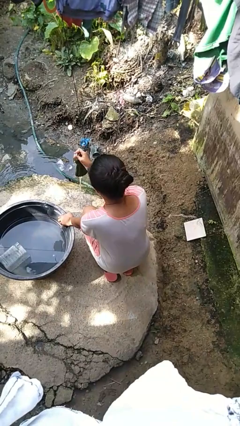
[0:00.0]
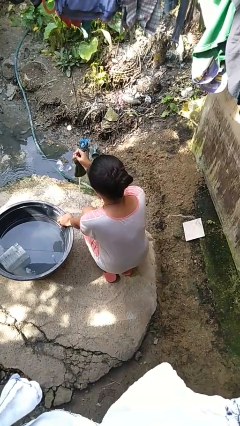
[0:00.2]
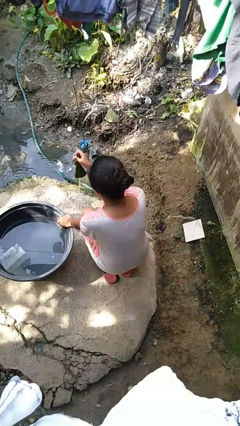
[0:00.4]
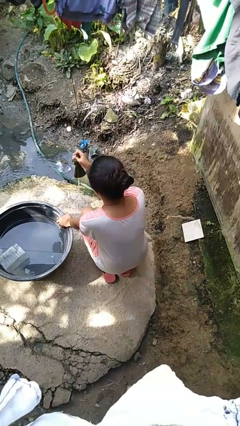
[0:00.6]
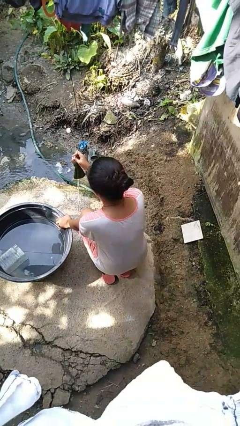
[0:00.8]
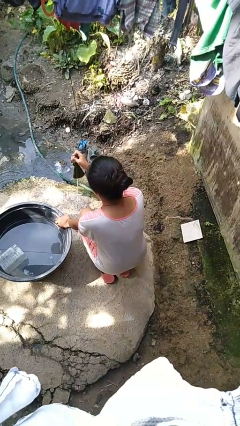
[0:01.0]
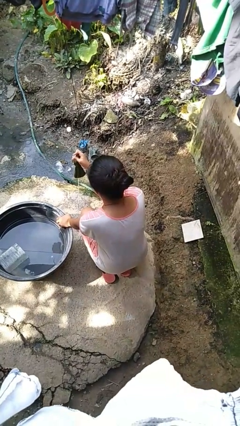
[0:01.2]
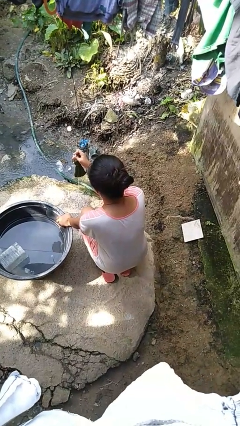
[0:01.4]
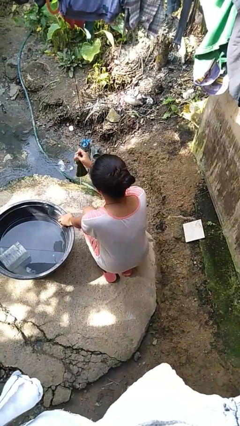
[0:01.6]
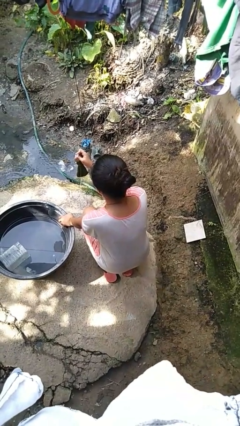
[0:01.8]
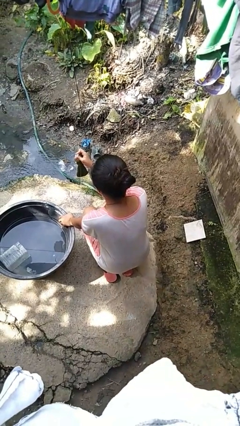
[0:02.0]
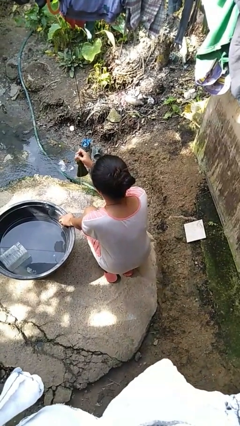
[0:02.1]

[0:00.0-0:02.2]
person turns off faucet

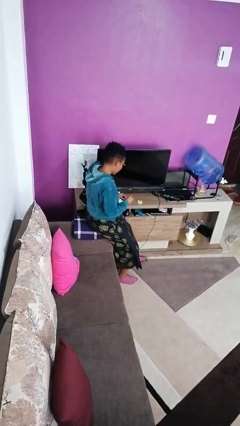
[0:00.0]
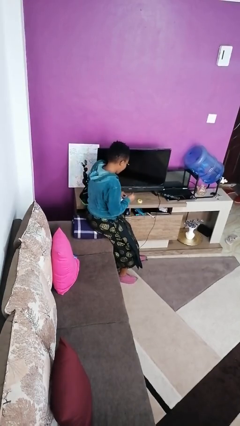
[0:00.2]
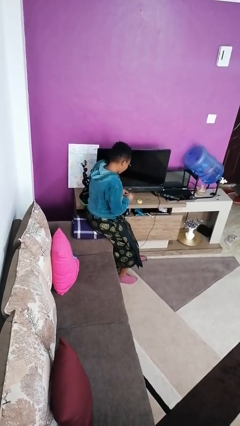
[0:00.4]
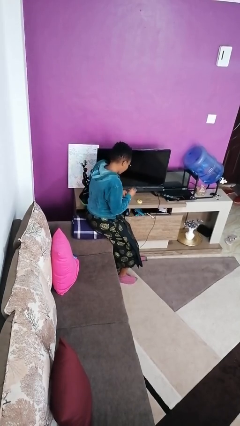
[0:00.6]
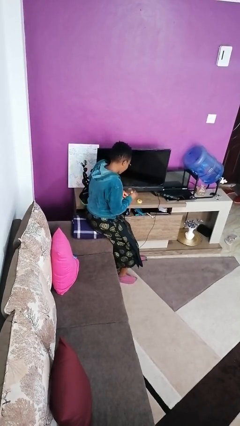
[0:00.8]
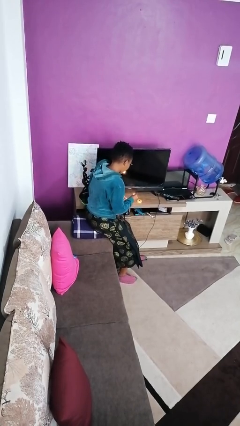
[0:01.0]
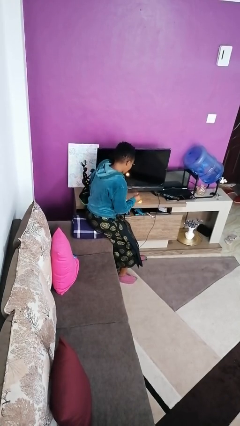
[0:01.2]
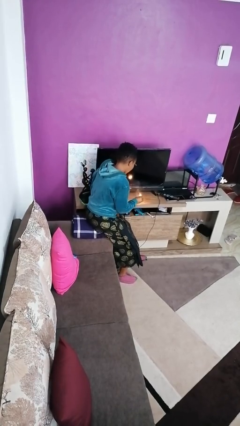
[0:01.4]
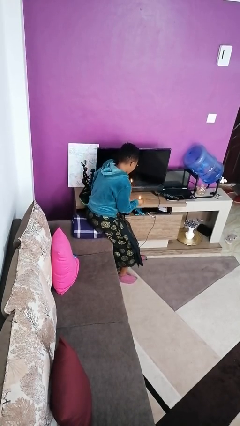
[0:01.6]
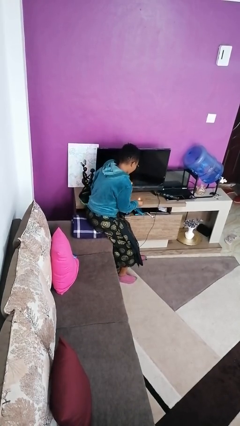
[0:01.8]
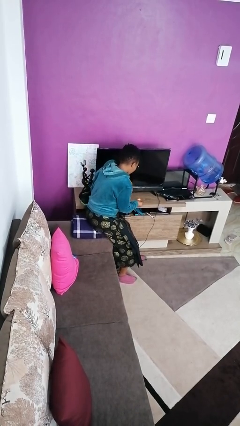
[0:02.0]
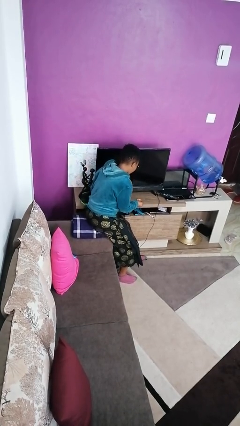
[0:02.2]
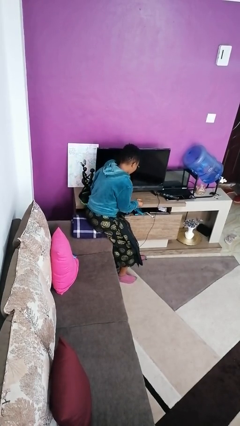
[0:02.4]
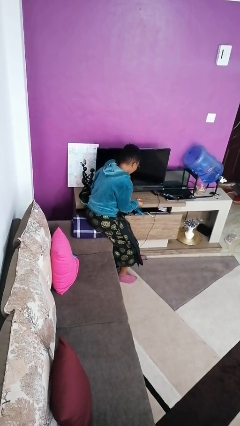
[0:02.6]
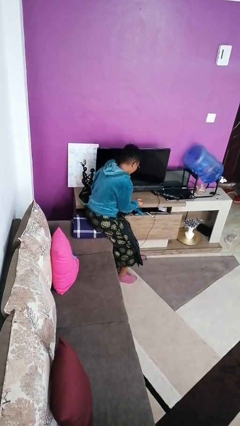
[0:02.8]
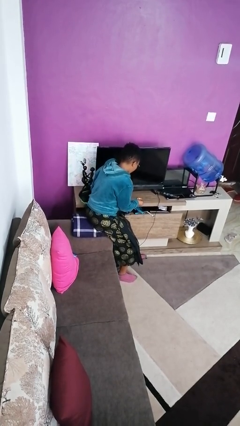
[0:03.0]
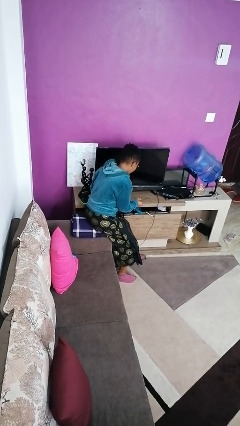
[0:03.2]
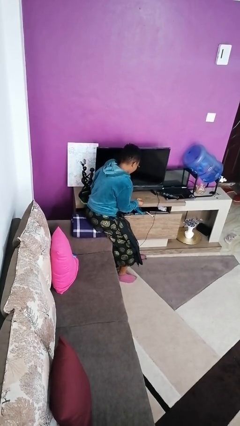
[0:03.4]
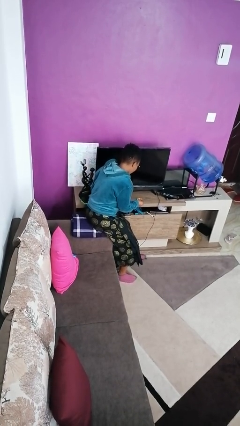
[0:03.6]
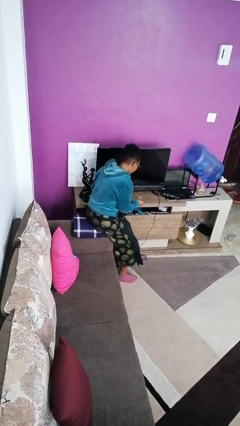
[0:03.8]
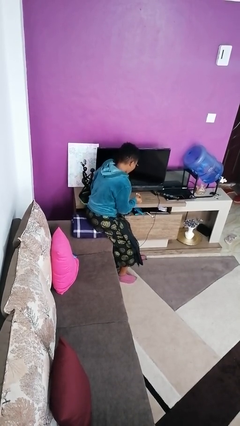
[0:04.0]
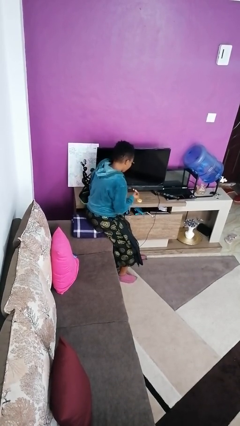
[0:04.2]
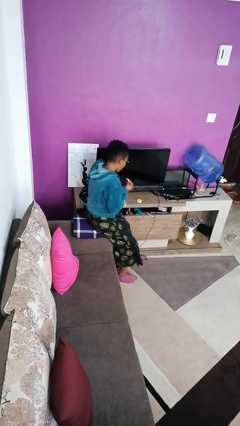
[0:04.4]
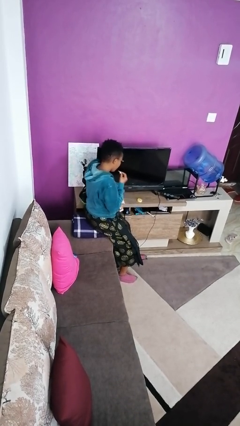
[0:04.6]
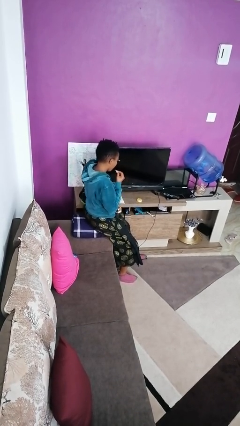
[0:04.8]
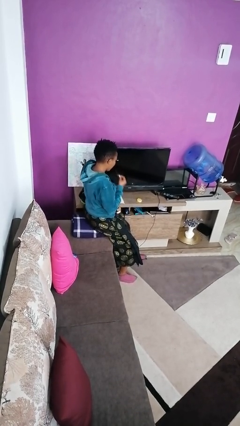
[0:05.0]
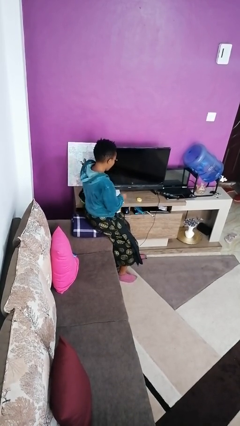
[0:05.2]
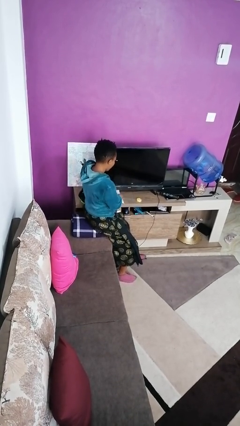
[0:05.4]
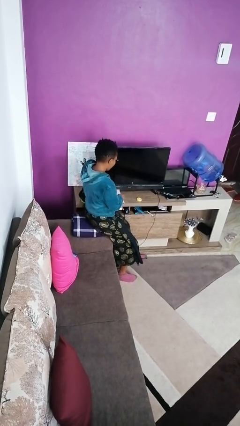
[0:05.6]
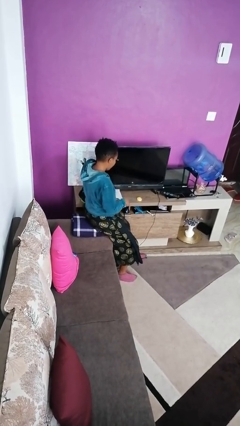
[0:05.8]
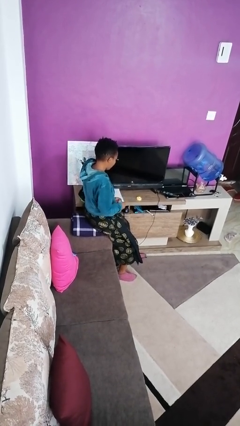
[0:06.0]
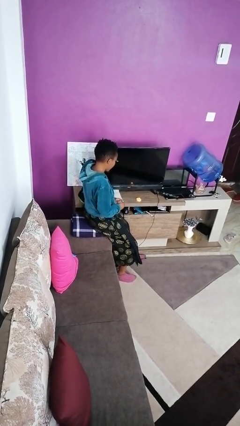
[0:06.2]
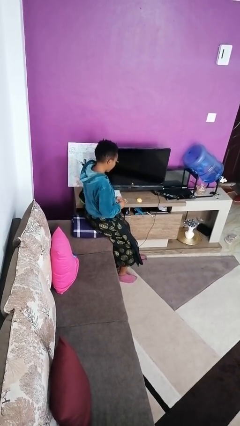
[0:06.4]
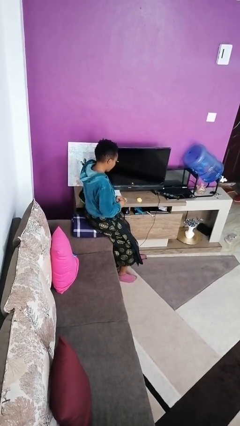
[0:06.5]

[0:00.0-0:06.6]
person lights candle

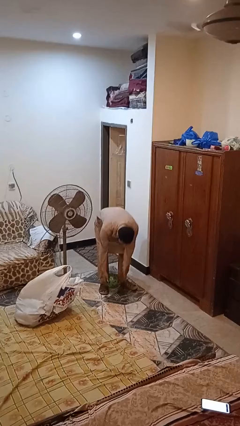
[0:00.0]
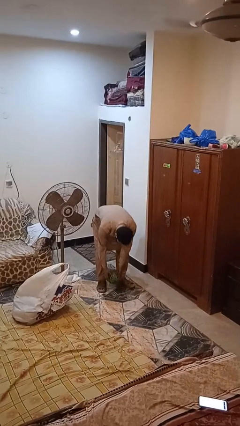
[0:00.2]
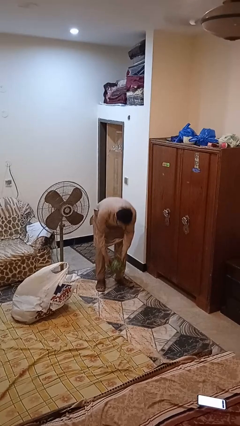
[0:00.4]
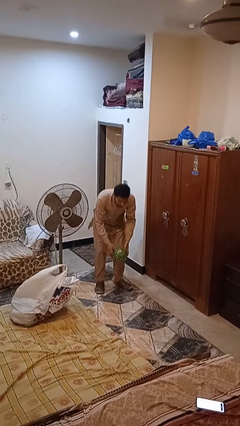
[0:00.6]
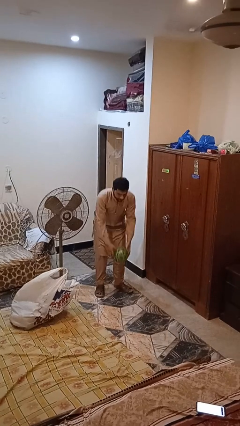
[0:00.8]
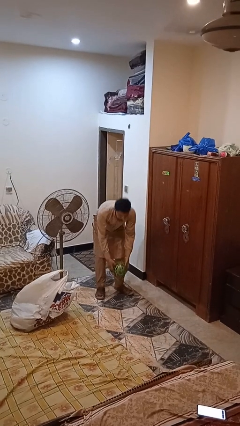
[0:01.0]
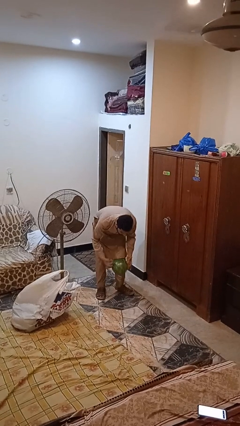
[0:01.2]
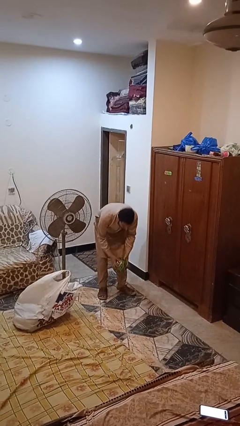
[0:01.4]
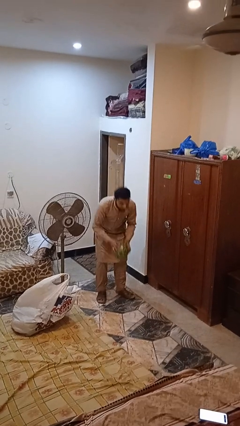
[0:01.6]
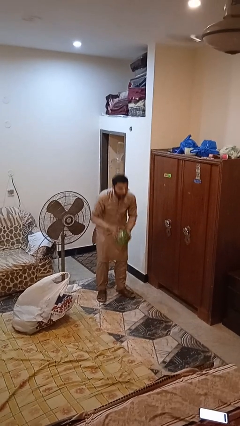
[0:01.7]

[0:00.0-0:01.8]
person picks up object from floor

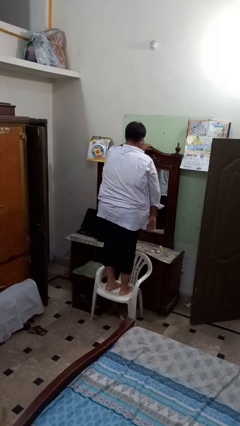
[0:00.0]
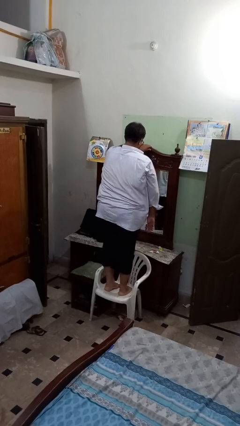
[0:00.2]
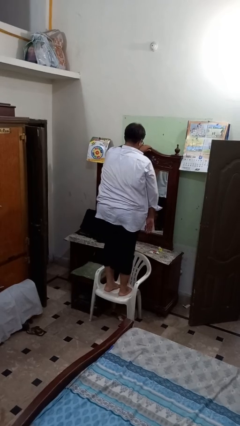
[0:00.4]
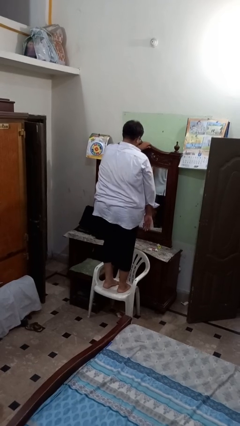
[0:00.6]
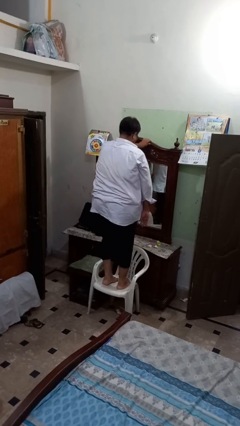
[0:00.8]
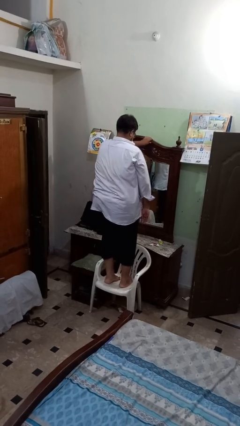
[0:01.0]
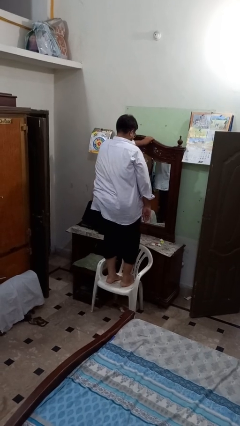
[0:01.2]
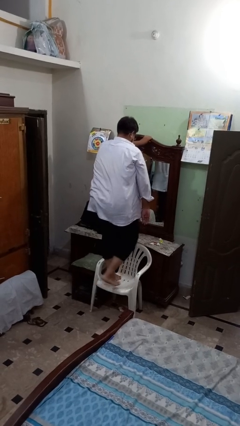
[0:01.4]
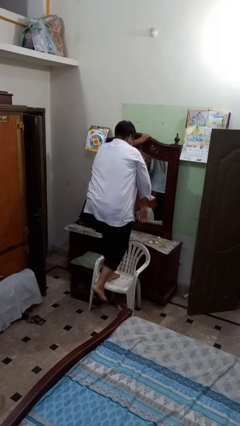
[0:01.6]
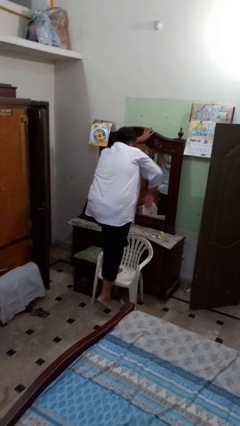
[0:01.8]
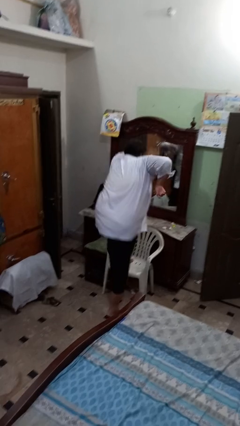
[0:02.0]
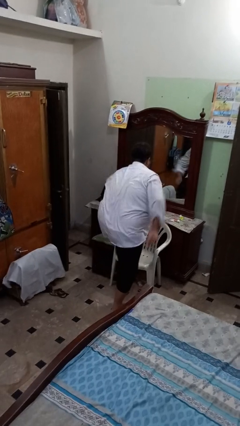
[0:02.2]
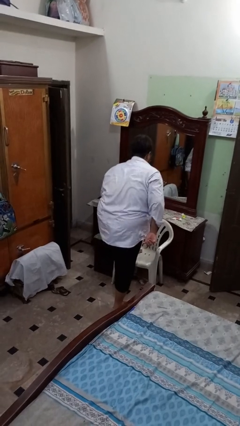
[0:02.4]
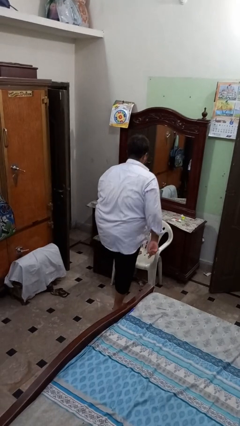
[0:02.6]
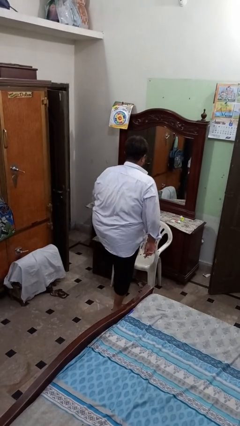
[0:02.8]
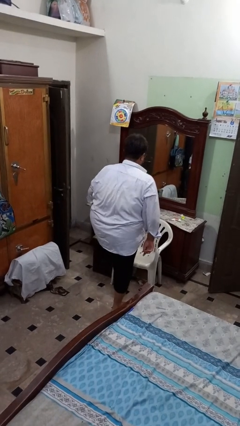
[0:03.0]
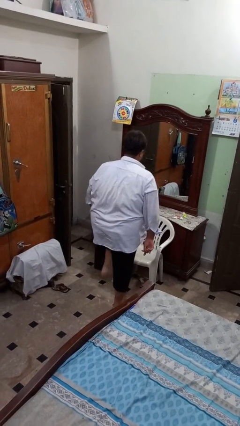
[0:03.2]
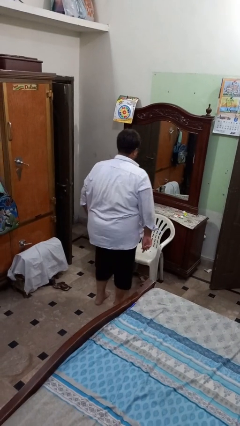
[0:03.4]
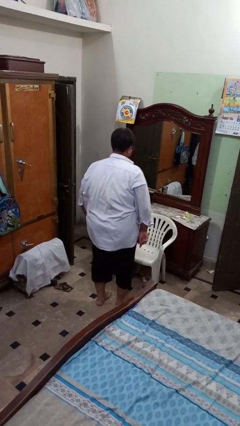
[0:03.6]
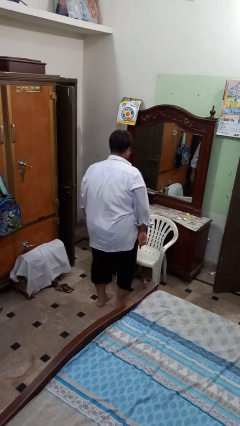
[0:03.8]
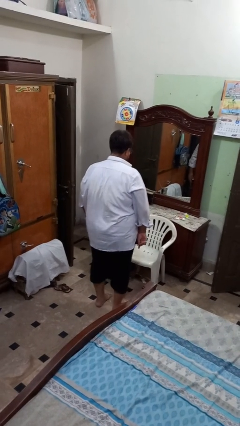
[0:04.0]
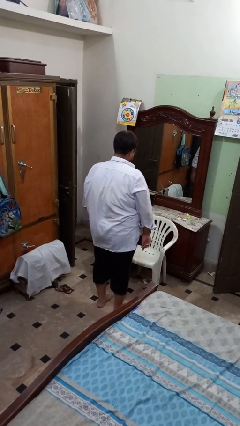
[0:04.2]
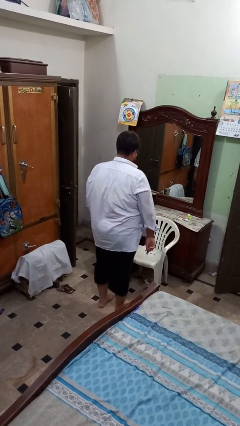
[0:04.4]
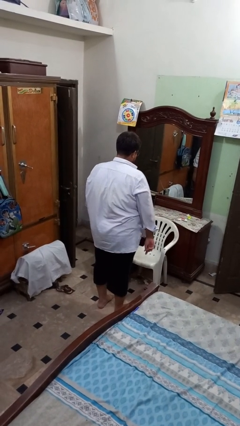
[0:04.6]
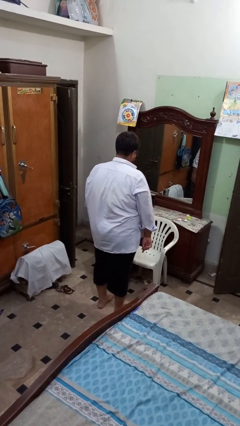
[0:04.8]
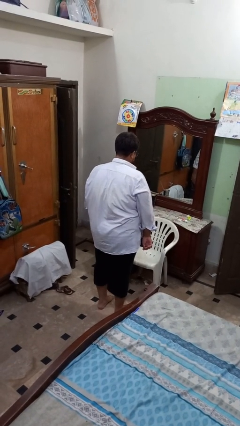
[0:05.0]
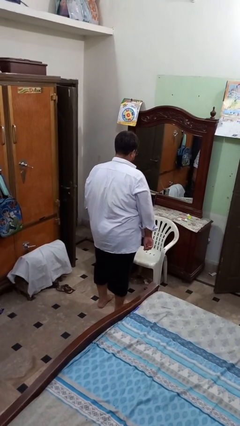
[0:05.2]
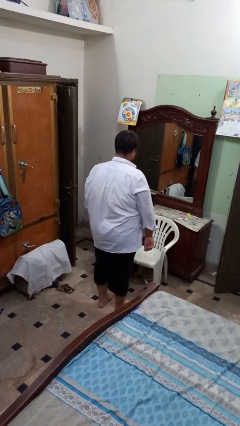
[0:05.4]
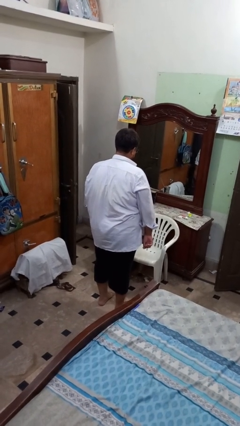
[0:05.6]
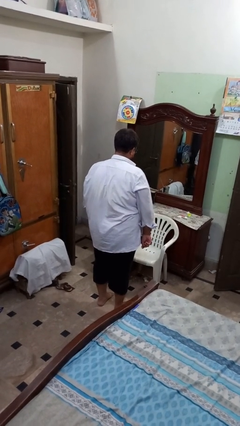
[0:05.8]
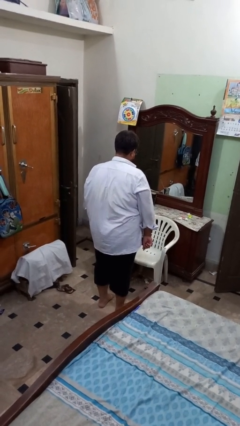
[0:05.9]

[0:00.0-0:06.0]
person climbs off chair

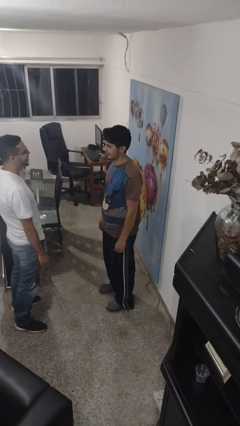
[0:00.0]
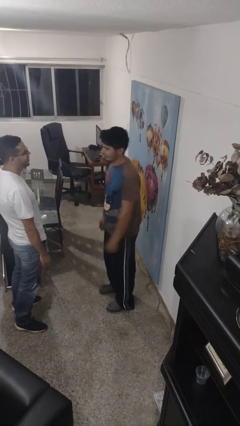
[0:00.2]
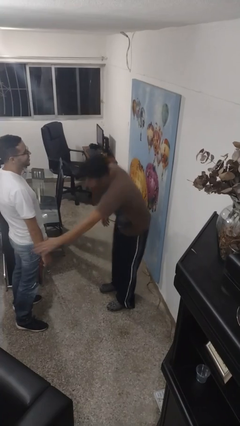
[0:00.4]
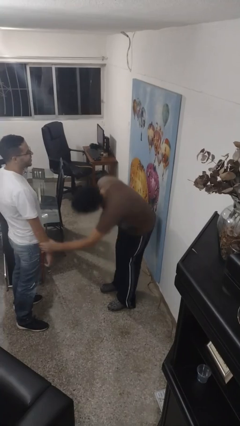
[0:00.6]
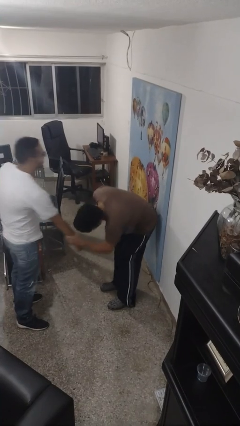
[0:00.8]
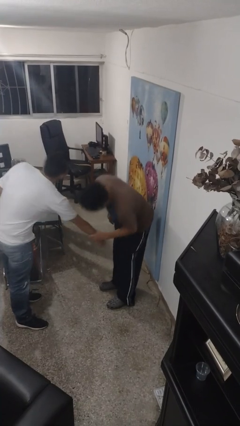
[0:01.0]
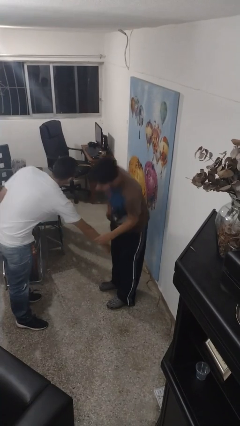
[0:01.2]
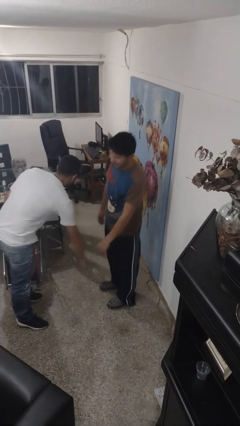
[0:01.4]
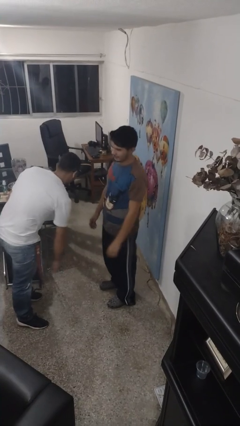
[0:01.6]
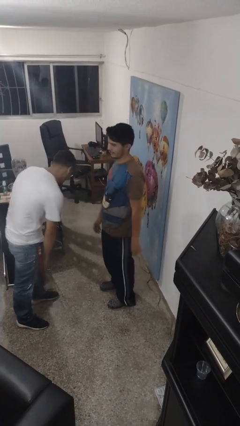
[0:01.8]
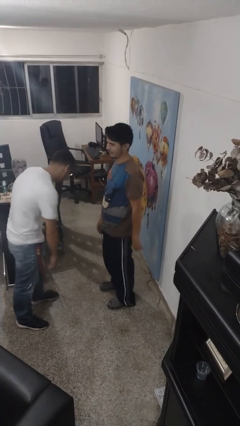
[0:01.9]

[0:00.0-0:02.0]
person grabs person by forearm
